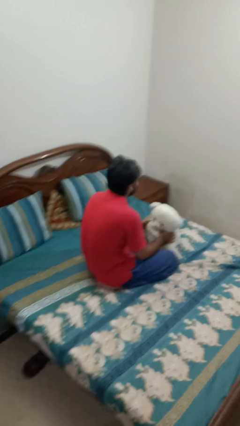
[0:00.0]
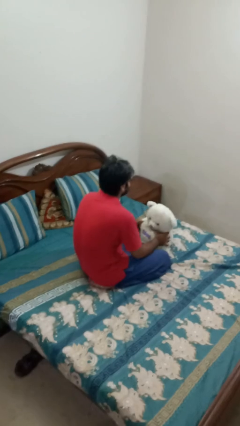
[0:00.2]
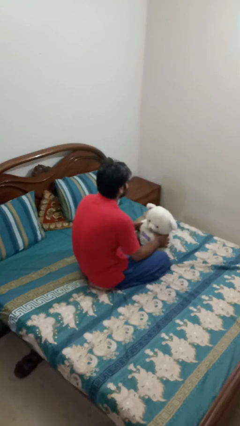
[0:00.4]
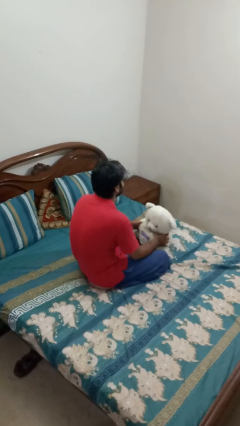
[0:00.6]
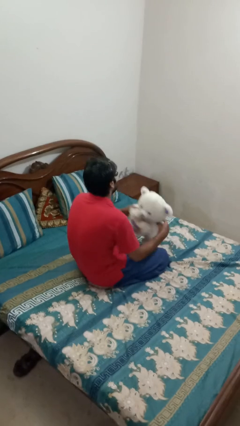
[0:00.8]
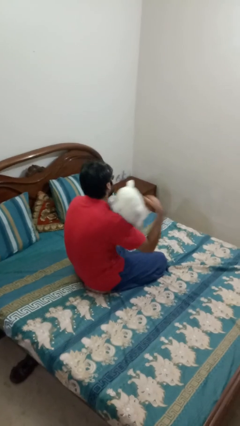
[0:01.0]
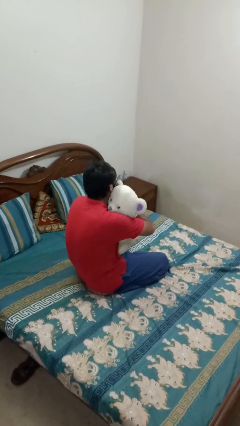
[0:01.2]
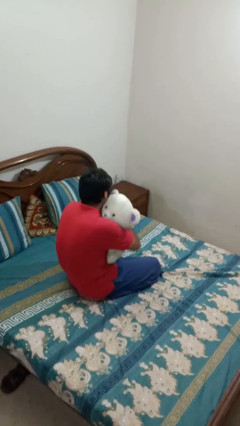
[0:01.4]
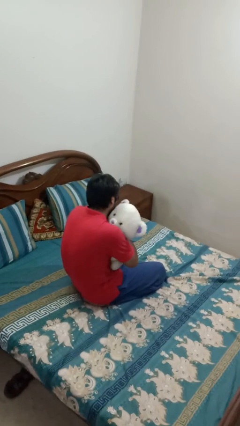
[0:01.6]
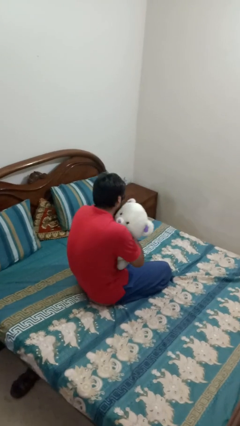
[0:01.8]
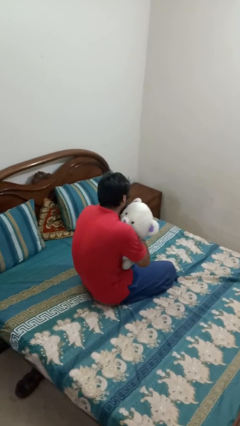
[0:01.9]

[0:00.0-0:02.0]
person hugs stuffed animal

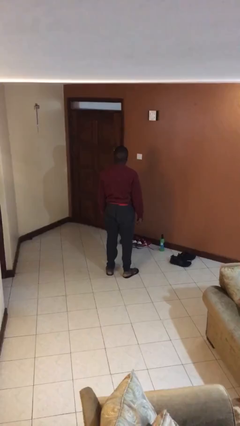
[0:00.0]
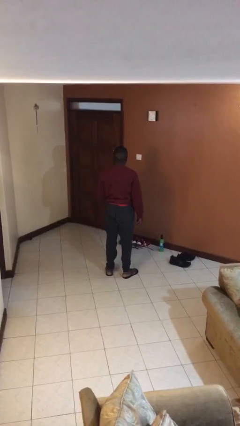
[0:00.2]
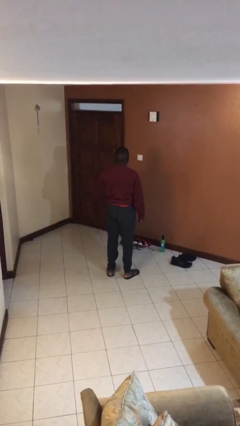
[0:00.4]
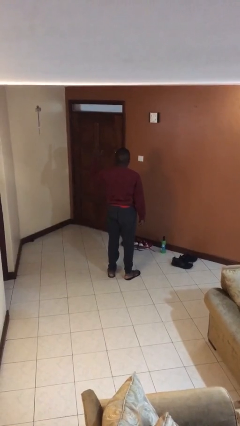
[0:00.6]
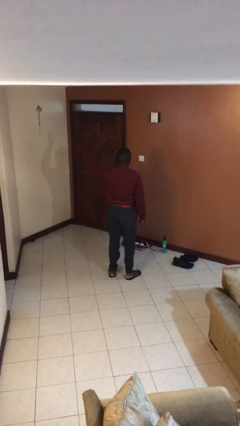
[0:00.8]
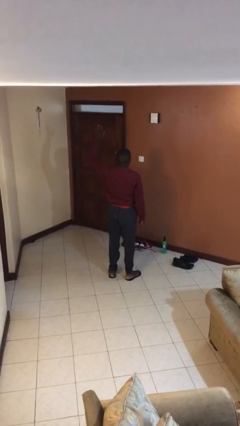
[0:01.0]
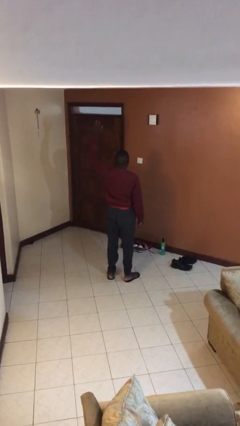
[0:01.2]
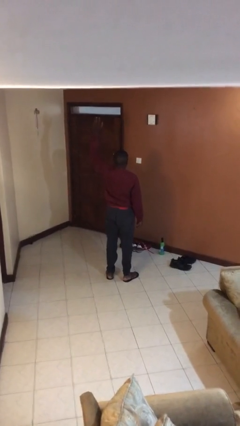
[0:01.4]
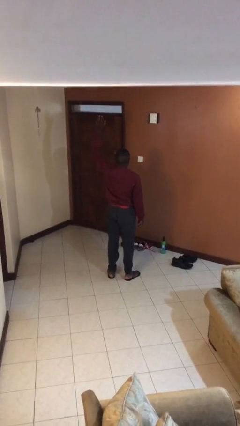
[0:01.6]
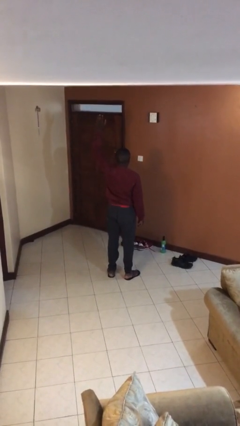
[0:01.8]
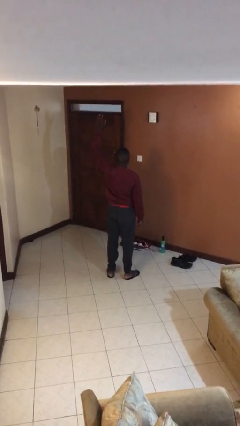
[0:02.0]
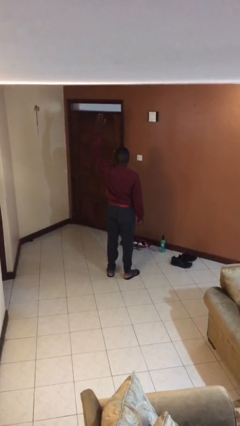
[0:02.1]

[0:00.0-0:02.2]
person gestures raise hand

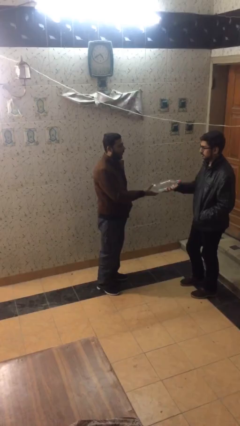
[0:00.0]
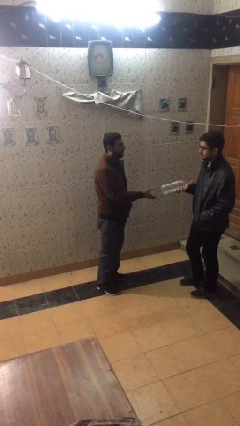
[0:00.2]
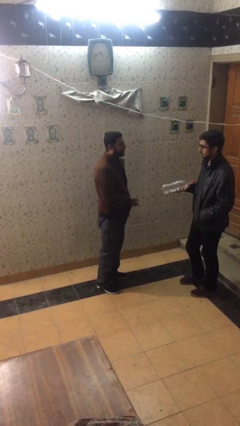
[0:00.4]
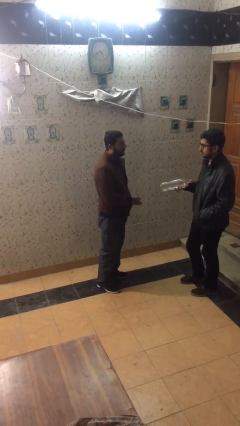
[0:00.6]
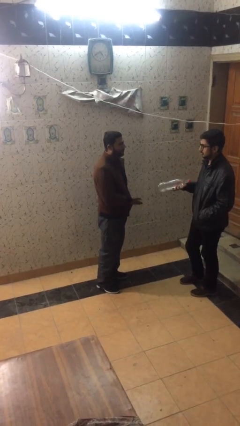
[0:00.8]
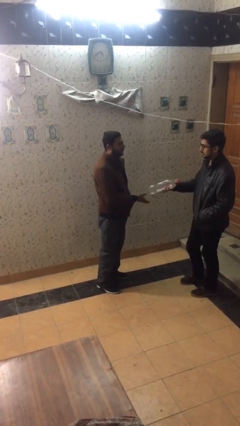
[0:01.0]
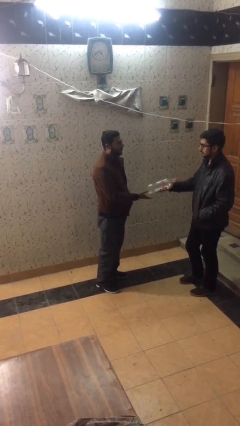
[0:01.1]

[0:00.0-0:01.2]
person transfers object to person

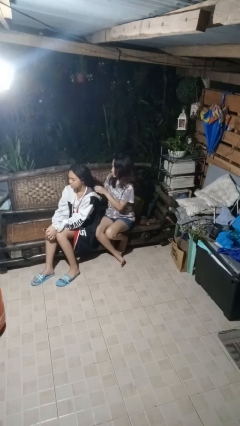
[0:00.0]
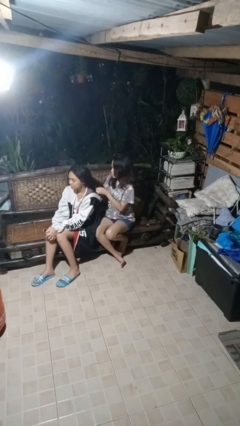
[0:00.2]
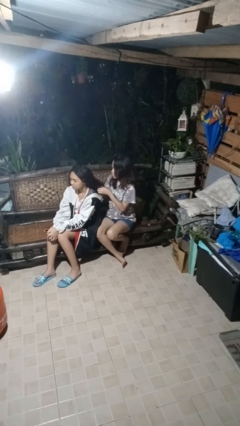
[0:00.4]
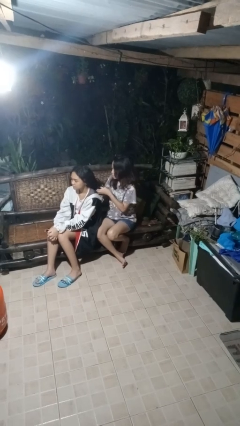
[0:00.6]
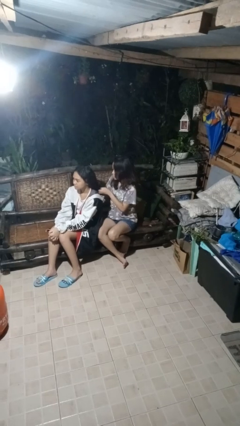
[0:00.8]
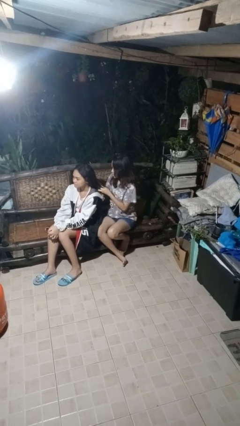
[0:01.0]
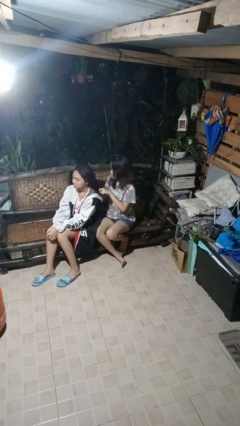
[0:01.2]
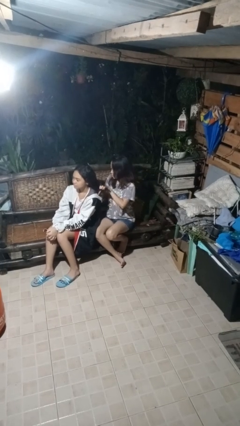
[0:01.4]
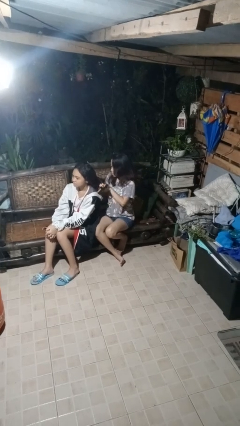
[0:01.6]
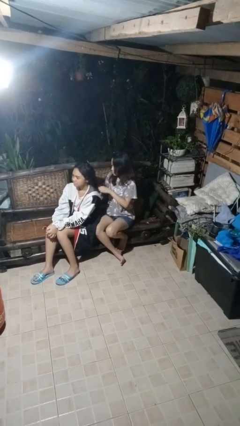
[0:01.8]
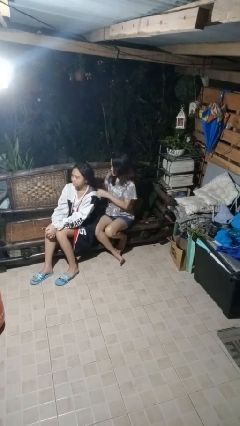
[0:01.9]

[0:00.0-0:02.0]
person braids hair of person

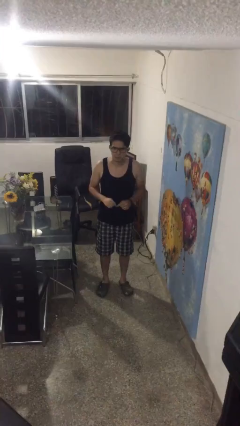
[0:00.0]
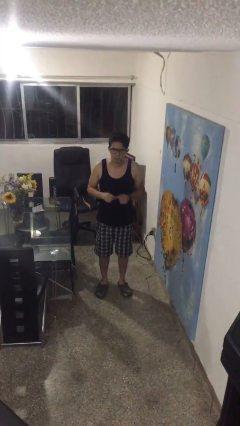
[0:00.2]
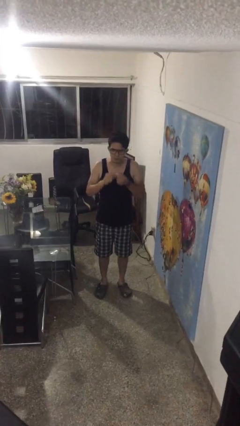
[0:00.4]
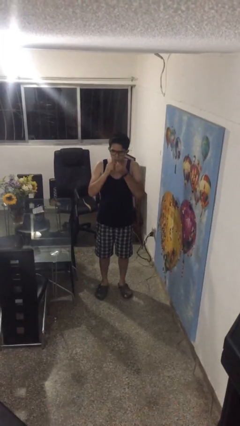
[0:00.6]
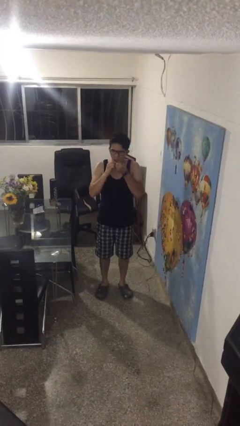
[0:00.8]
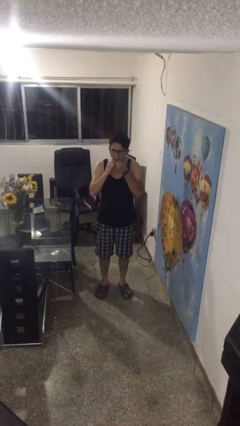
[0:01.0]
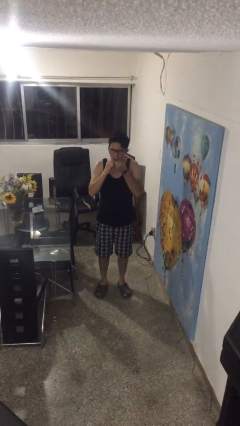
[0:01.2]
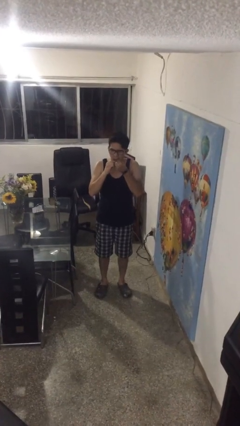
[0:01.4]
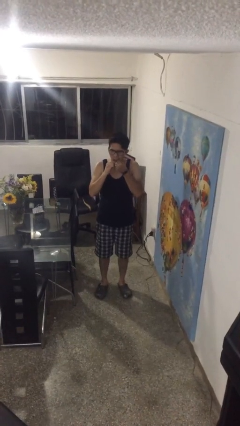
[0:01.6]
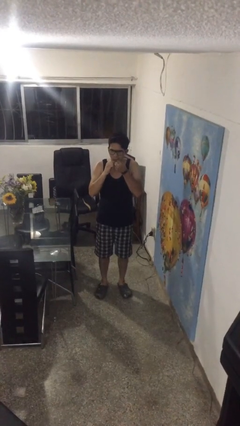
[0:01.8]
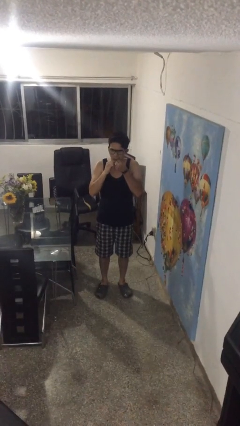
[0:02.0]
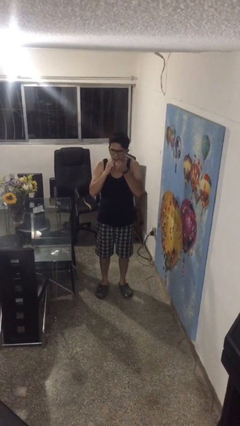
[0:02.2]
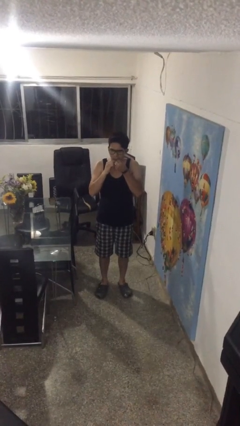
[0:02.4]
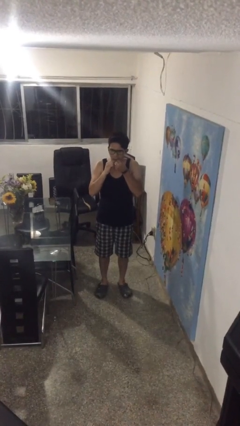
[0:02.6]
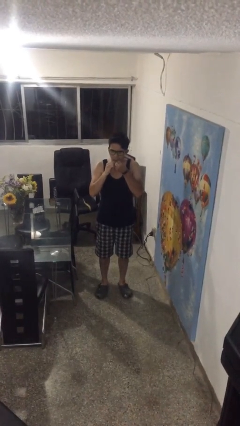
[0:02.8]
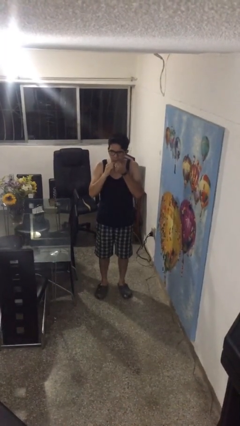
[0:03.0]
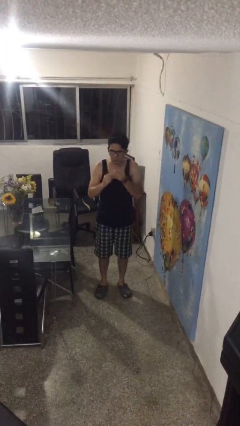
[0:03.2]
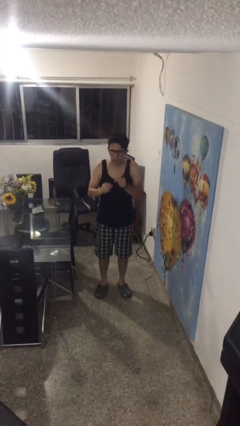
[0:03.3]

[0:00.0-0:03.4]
person flosses

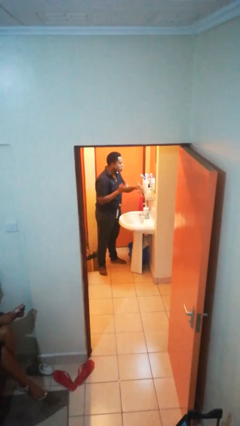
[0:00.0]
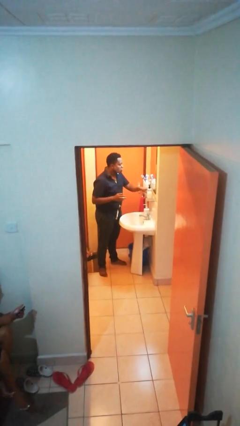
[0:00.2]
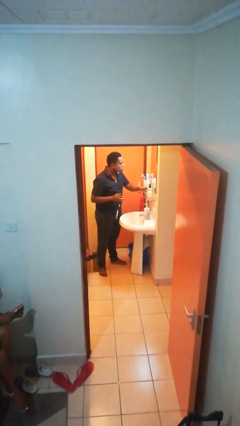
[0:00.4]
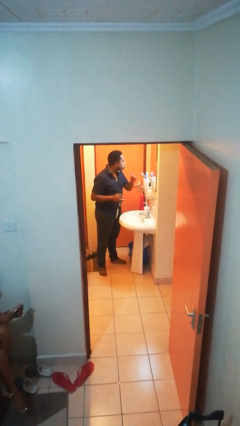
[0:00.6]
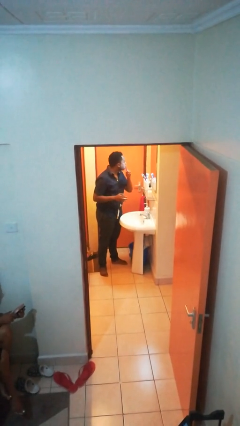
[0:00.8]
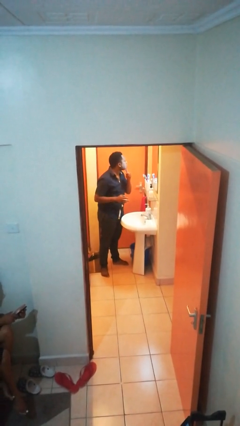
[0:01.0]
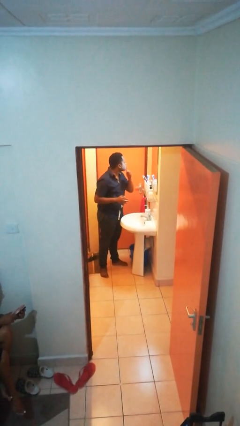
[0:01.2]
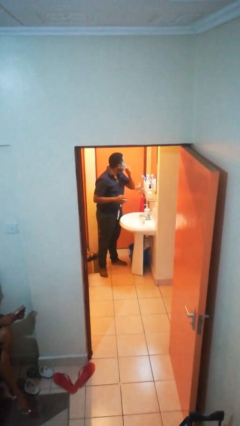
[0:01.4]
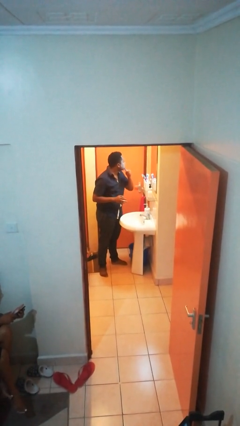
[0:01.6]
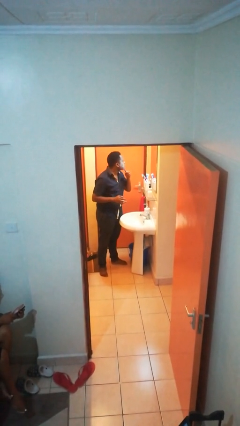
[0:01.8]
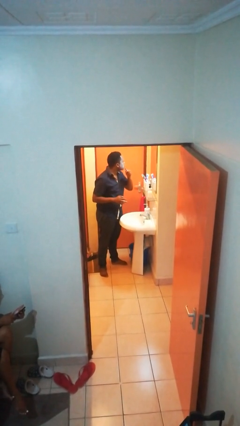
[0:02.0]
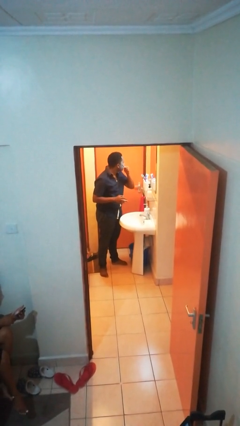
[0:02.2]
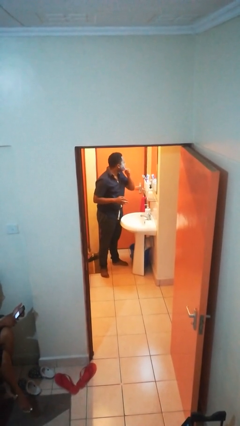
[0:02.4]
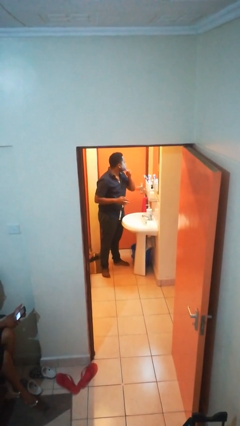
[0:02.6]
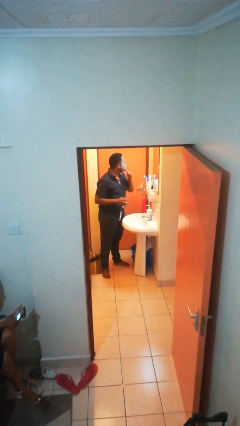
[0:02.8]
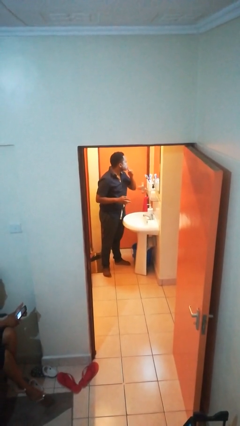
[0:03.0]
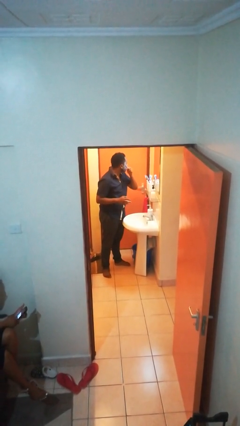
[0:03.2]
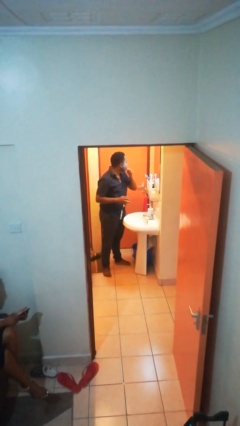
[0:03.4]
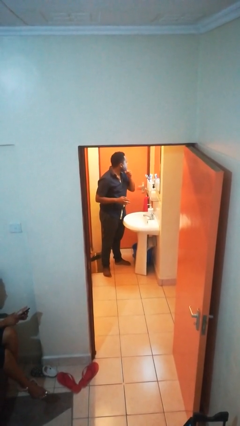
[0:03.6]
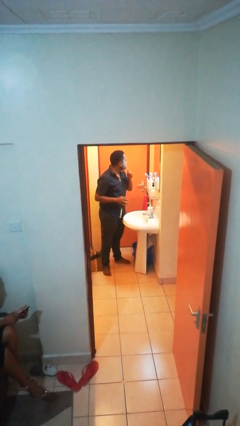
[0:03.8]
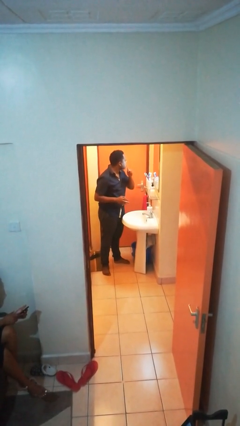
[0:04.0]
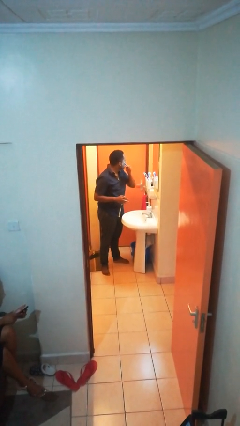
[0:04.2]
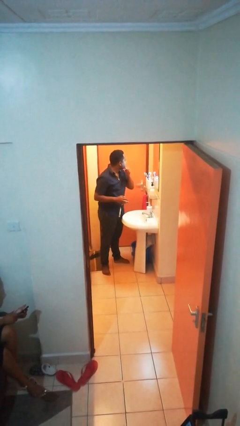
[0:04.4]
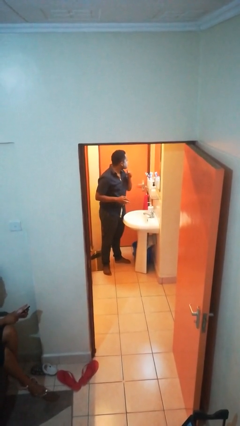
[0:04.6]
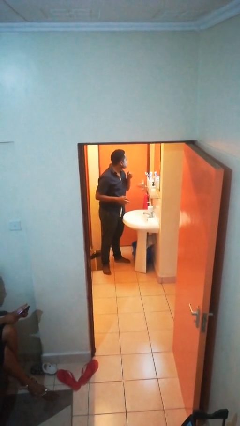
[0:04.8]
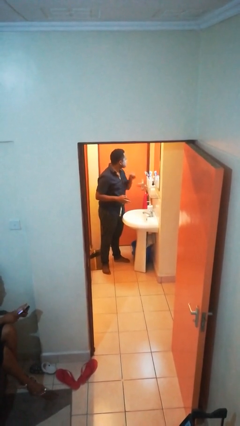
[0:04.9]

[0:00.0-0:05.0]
person shaves face

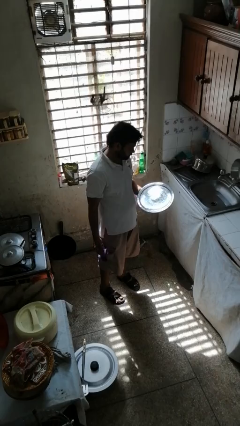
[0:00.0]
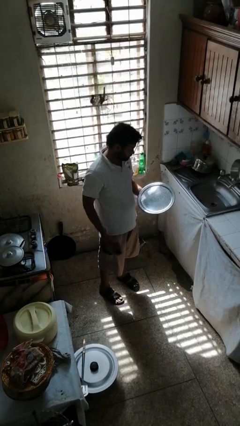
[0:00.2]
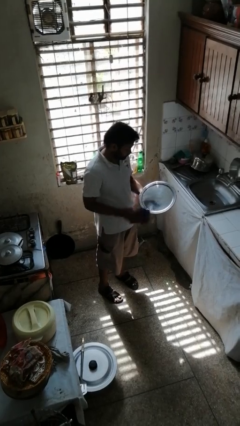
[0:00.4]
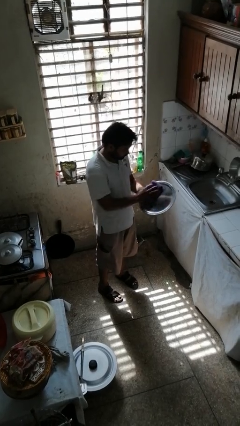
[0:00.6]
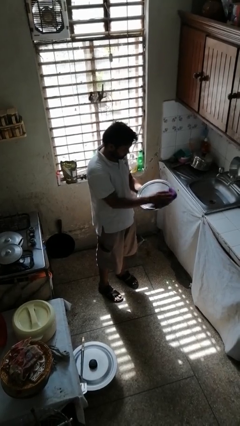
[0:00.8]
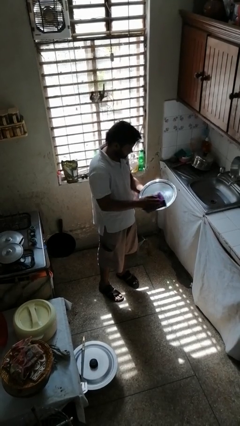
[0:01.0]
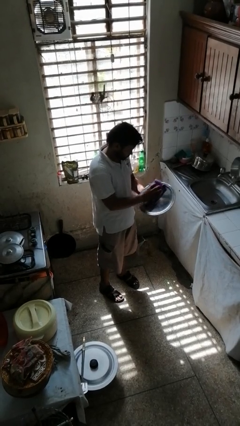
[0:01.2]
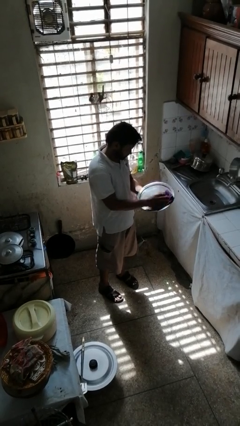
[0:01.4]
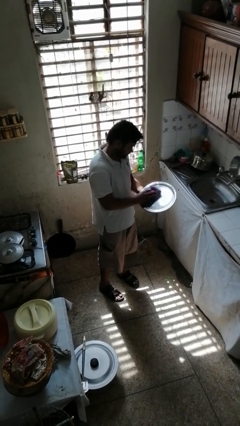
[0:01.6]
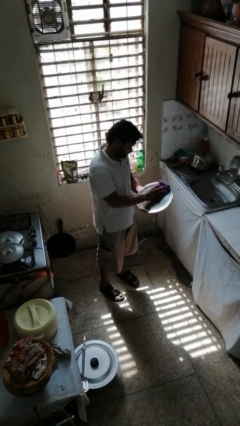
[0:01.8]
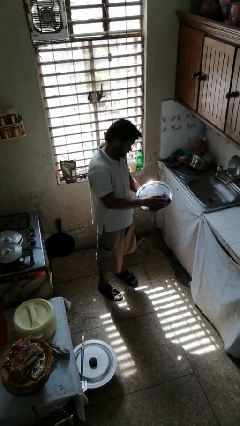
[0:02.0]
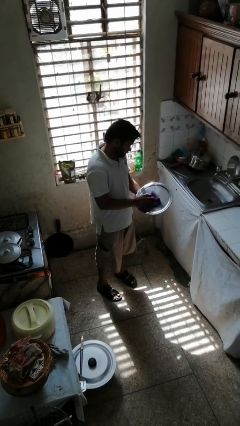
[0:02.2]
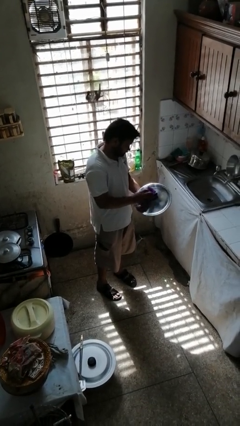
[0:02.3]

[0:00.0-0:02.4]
person dries dish
